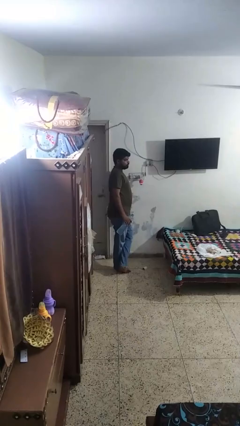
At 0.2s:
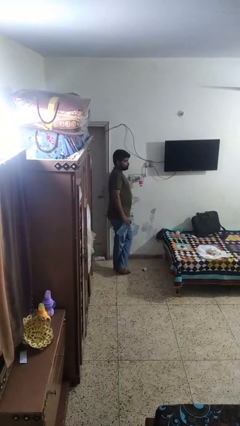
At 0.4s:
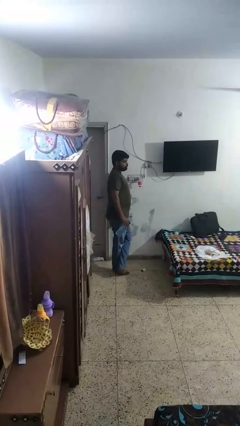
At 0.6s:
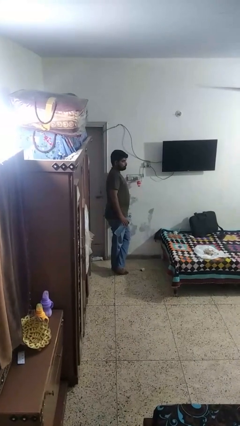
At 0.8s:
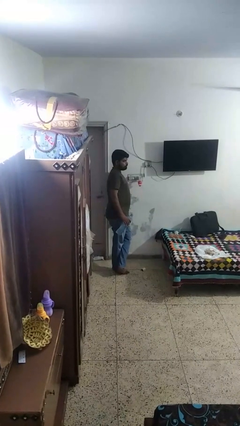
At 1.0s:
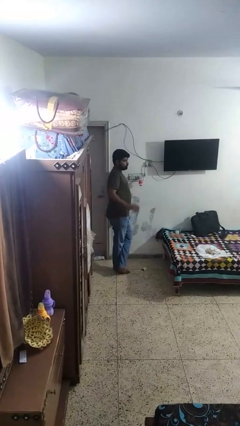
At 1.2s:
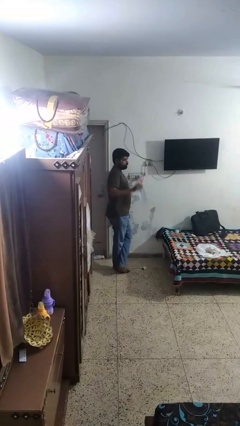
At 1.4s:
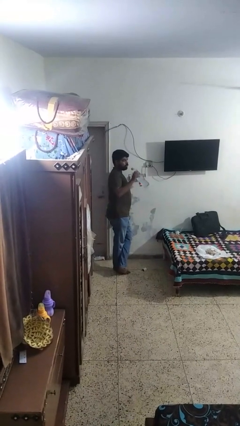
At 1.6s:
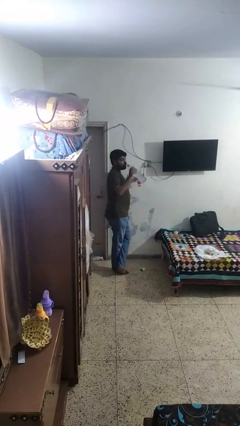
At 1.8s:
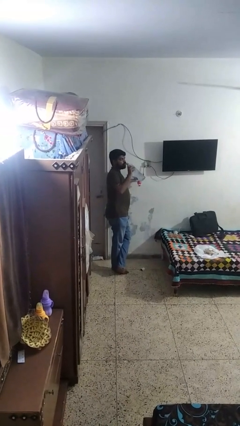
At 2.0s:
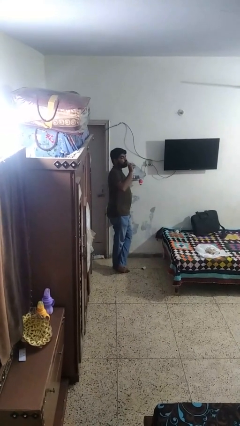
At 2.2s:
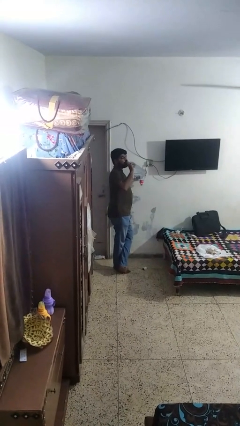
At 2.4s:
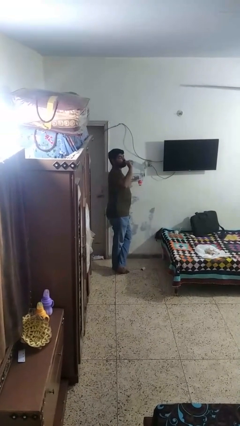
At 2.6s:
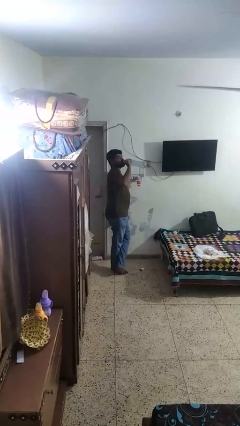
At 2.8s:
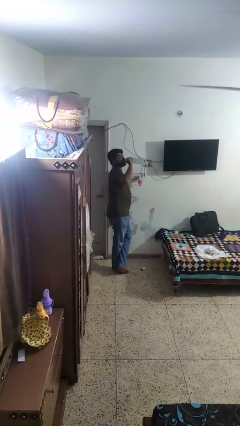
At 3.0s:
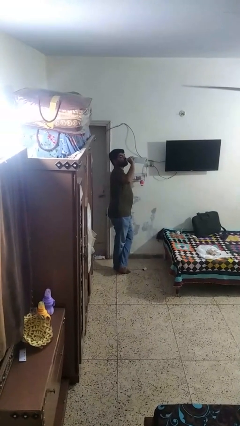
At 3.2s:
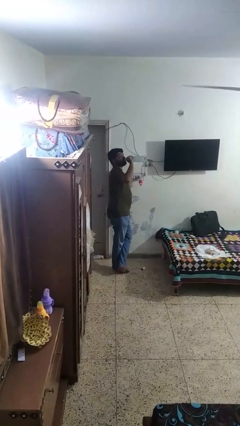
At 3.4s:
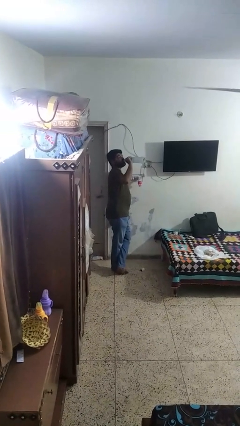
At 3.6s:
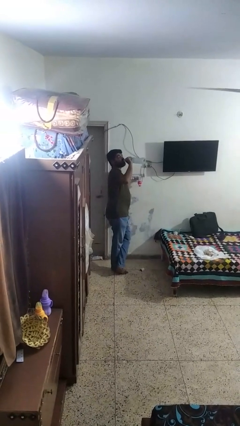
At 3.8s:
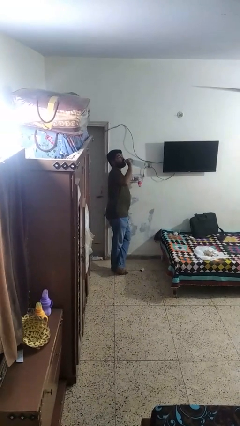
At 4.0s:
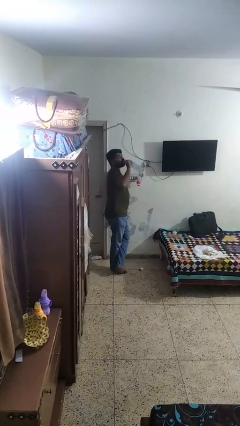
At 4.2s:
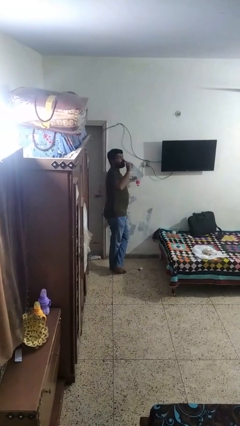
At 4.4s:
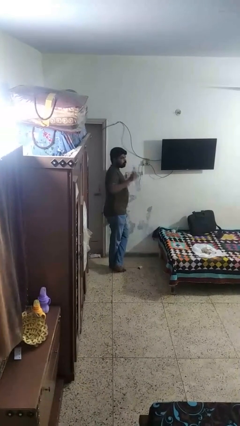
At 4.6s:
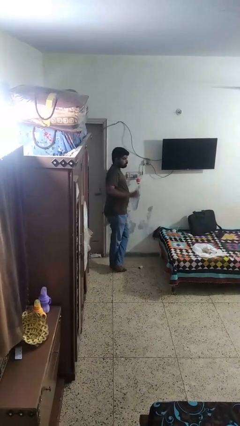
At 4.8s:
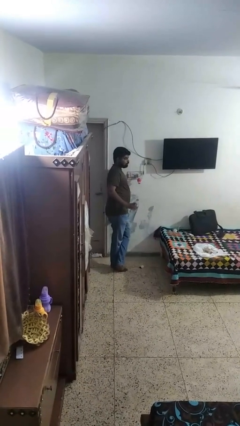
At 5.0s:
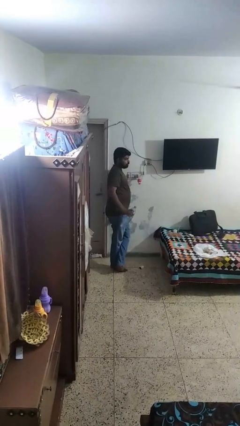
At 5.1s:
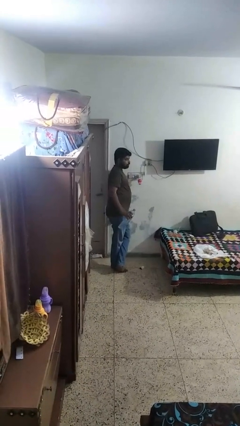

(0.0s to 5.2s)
person drinks from bottle

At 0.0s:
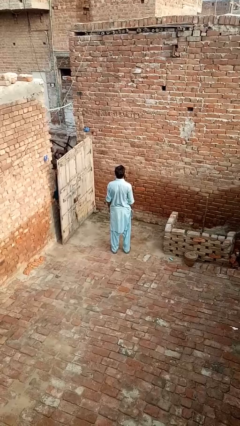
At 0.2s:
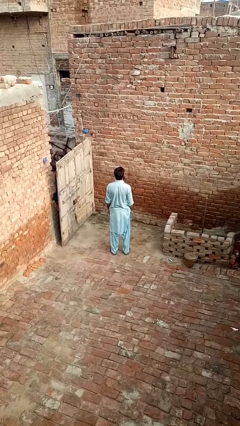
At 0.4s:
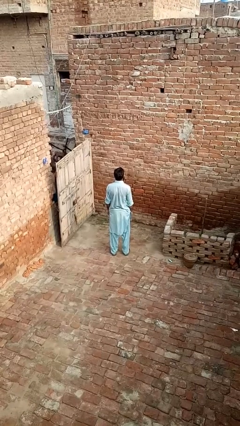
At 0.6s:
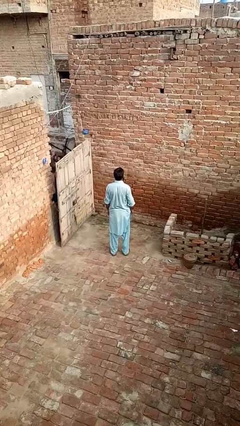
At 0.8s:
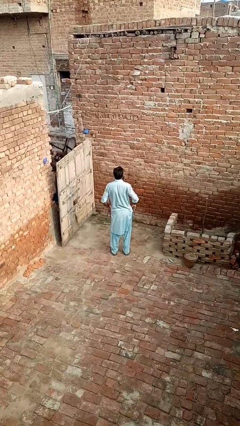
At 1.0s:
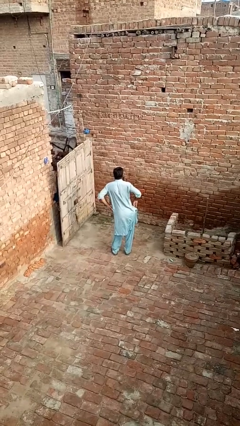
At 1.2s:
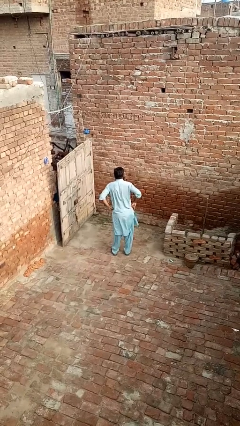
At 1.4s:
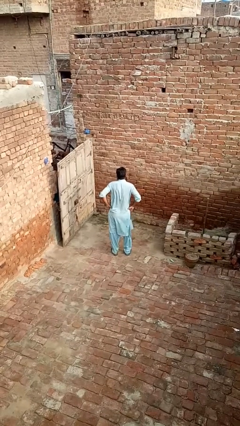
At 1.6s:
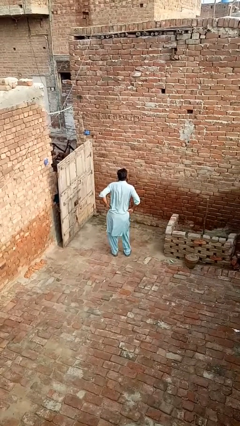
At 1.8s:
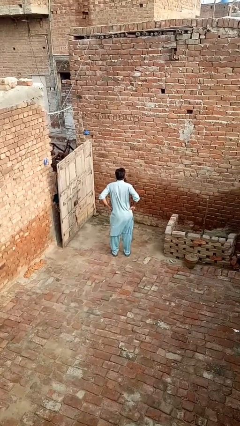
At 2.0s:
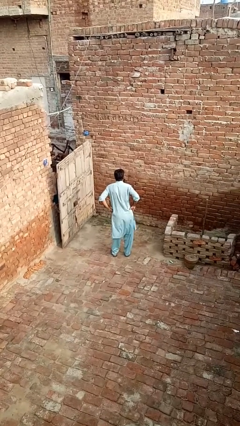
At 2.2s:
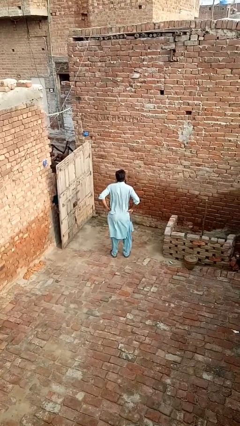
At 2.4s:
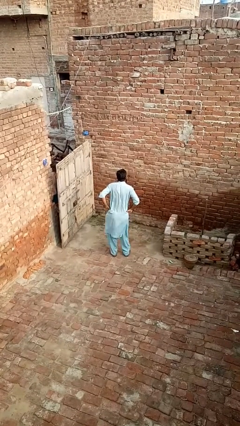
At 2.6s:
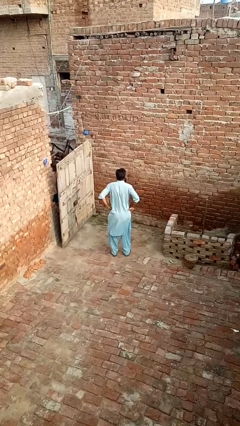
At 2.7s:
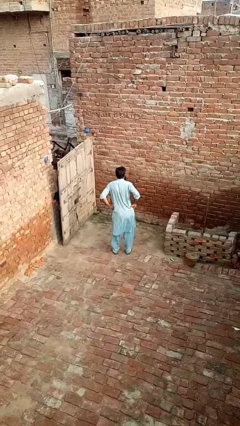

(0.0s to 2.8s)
person wiggles hips

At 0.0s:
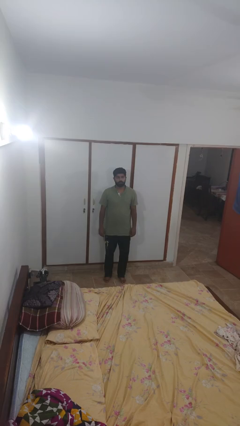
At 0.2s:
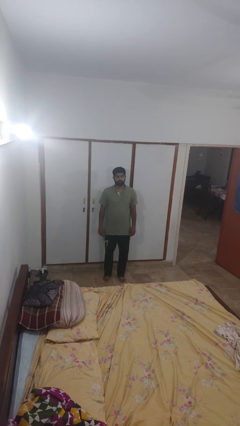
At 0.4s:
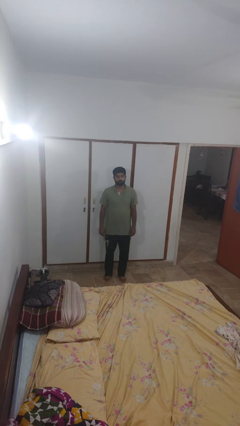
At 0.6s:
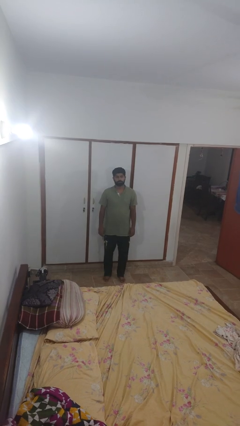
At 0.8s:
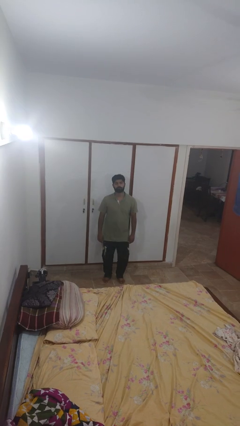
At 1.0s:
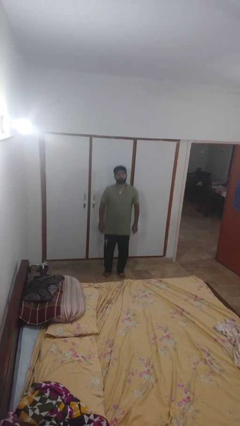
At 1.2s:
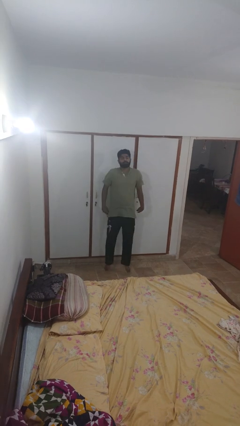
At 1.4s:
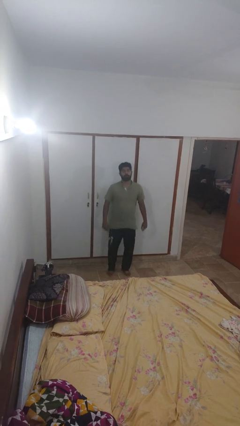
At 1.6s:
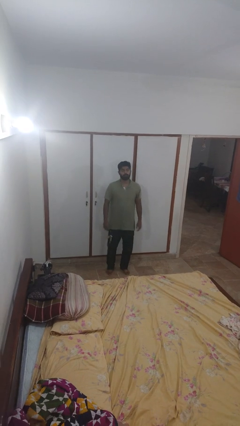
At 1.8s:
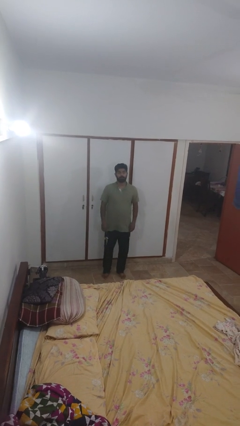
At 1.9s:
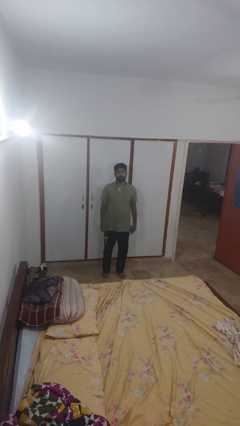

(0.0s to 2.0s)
person jumps

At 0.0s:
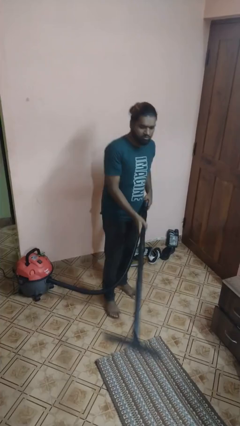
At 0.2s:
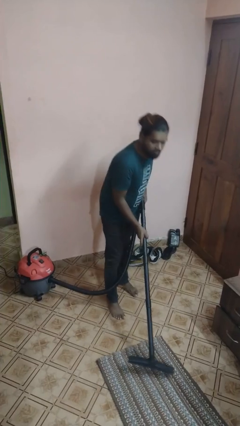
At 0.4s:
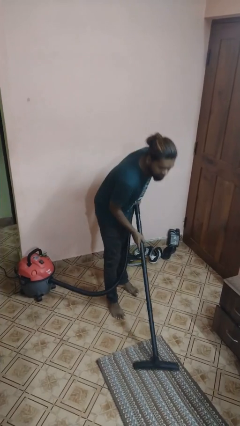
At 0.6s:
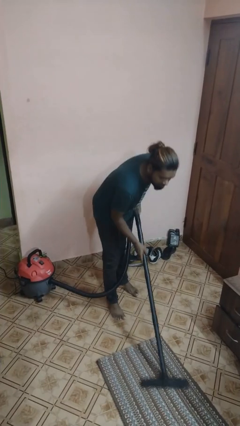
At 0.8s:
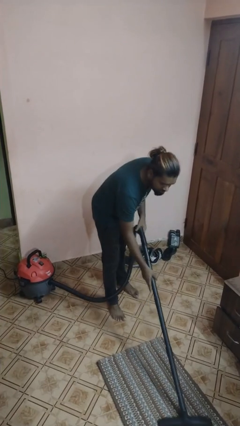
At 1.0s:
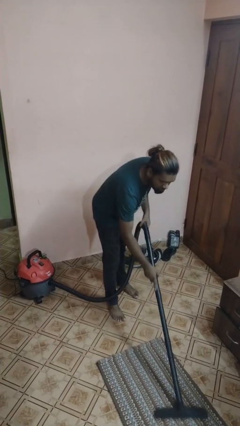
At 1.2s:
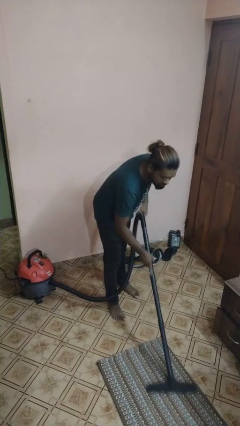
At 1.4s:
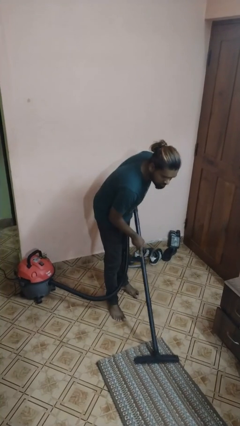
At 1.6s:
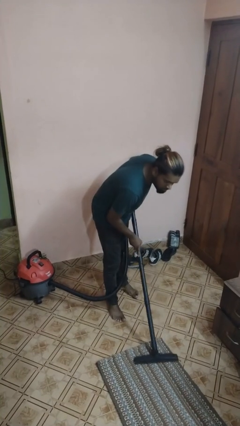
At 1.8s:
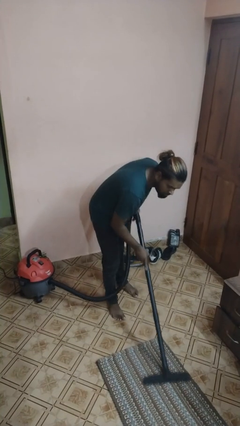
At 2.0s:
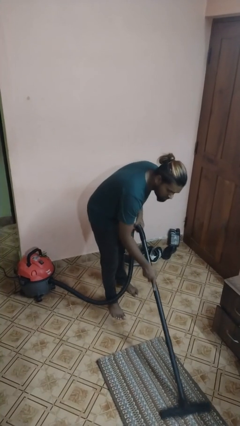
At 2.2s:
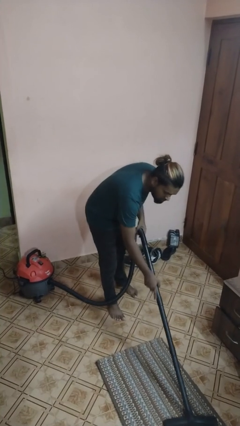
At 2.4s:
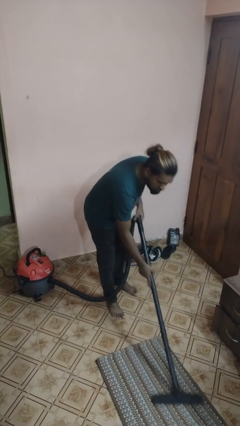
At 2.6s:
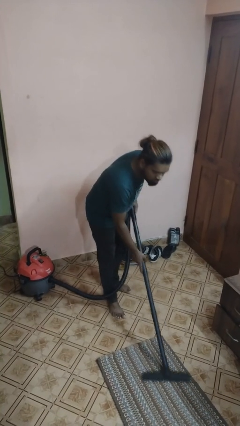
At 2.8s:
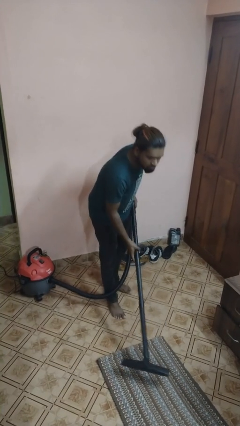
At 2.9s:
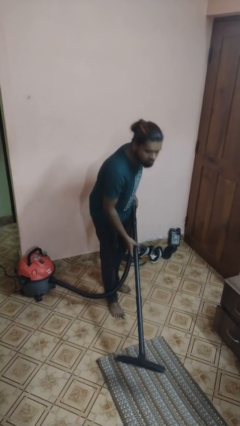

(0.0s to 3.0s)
person vacuums carpet

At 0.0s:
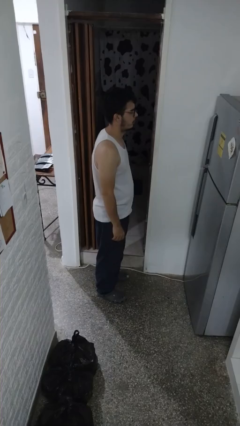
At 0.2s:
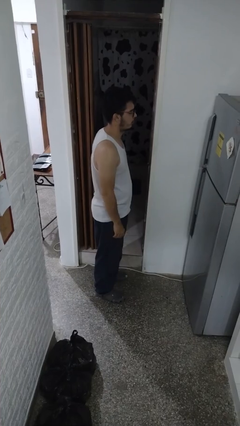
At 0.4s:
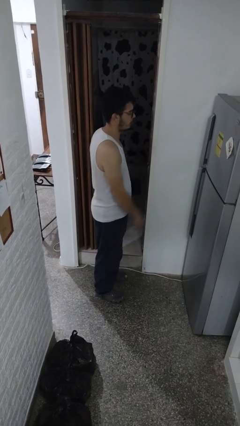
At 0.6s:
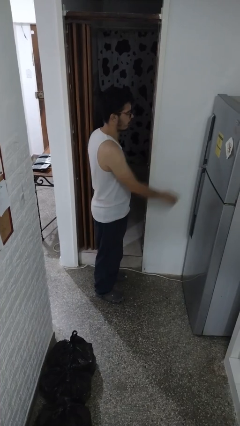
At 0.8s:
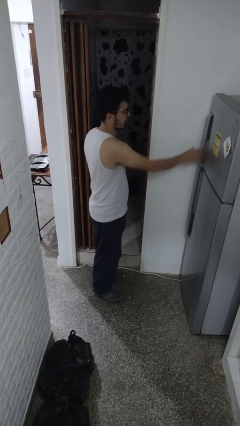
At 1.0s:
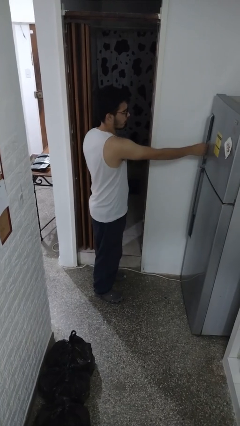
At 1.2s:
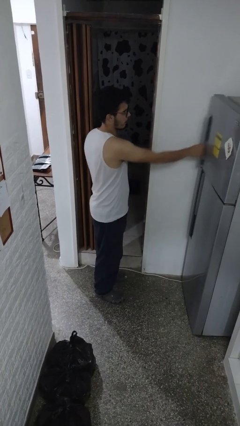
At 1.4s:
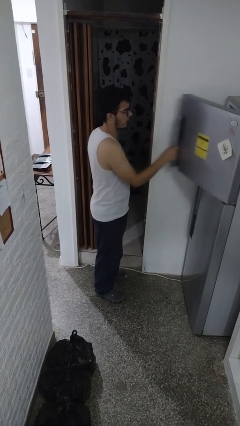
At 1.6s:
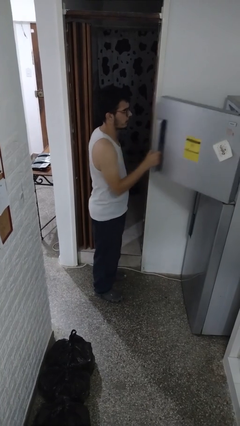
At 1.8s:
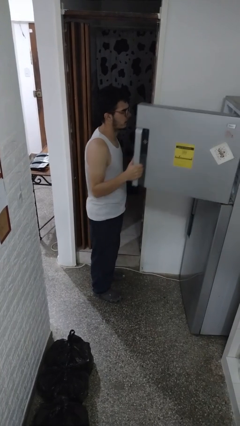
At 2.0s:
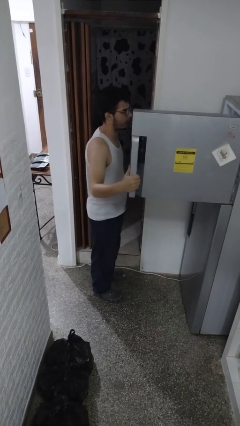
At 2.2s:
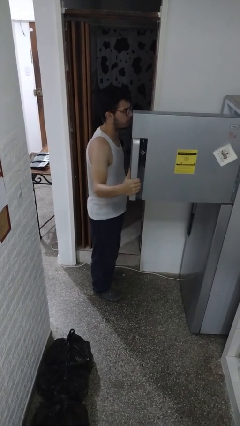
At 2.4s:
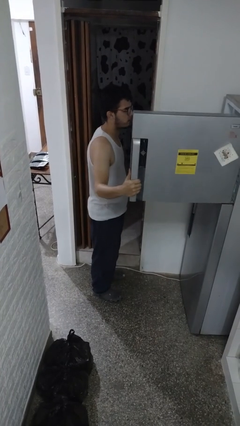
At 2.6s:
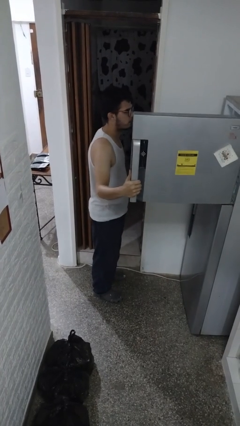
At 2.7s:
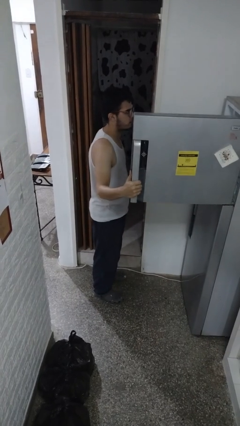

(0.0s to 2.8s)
person opens refrigerator

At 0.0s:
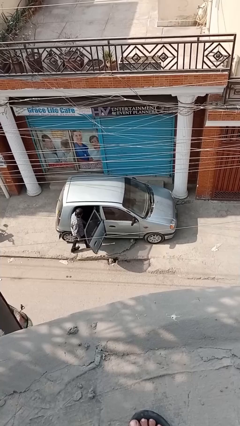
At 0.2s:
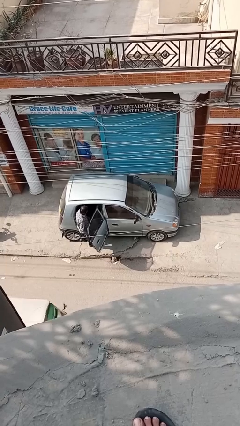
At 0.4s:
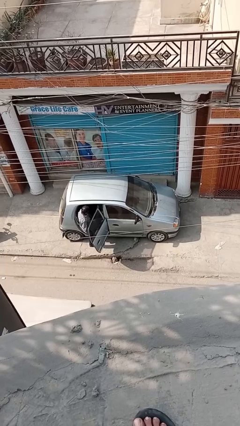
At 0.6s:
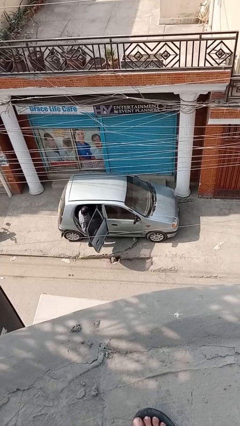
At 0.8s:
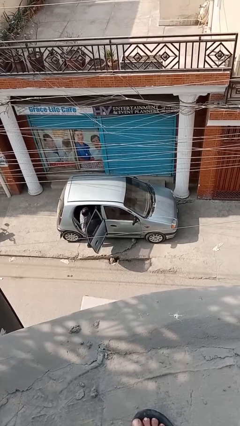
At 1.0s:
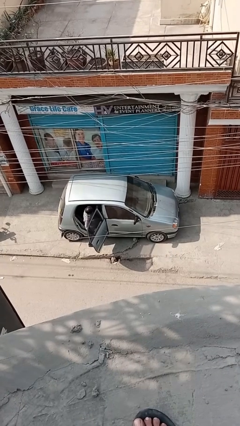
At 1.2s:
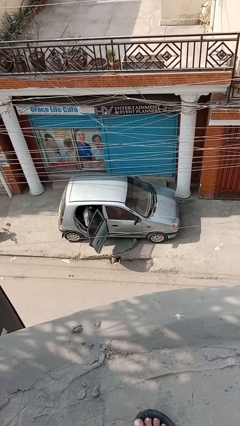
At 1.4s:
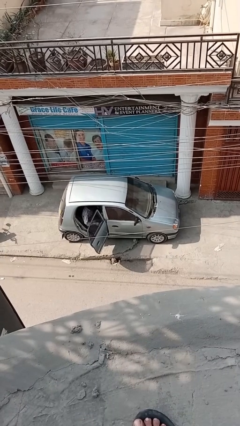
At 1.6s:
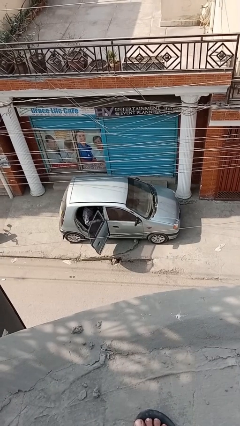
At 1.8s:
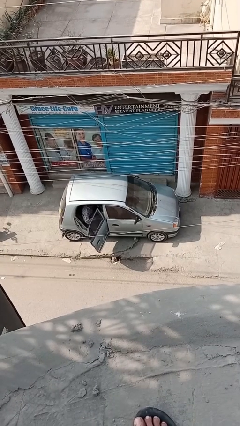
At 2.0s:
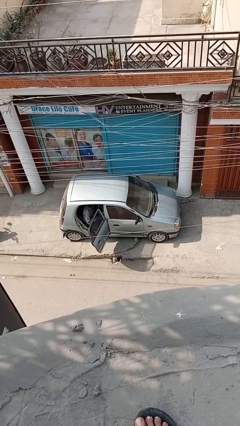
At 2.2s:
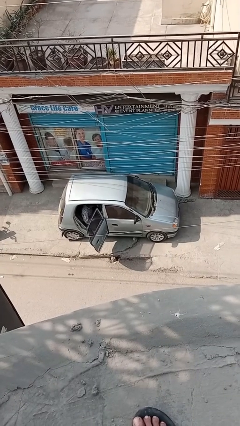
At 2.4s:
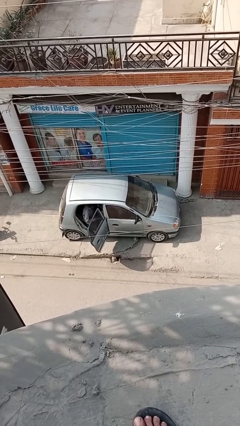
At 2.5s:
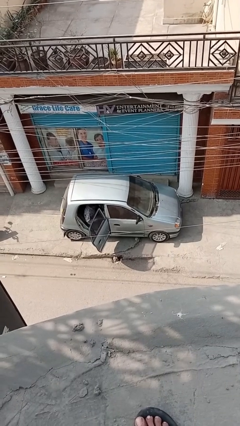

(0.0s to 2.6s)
person enters car
